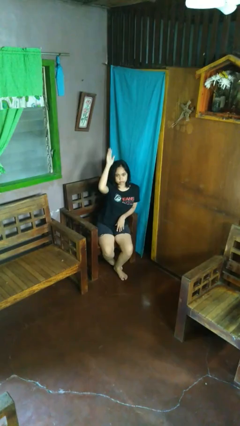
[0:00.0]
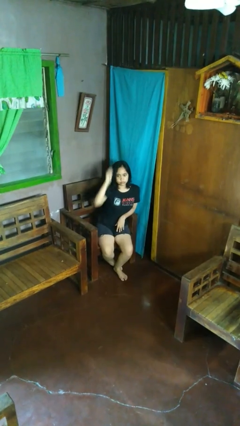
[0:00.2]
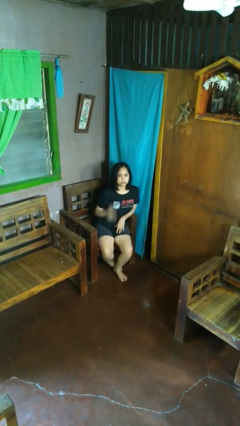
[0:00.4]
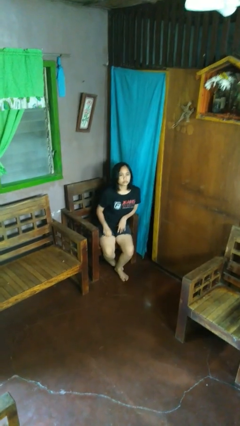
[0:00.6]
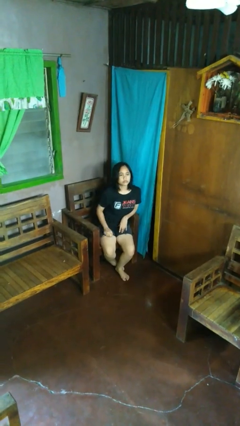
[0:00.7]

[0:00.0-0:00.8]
person gestures lower hand

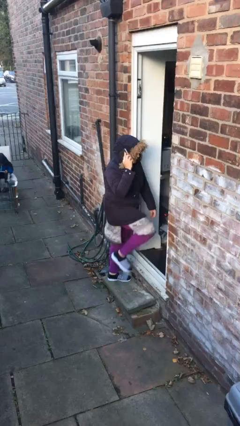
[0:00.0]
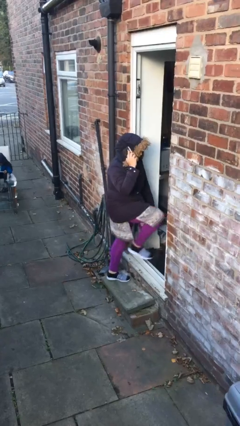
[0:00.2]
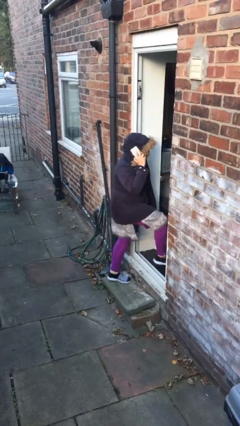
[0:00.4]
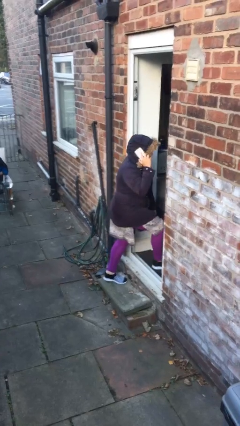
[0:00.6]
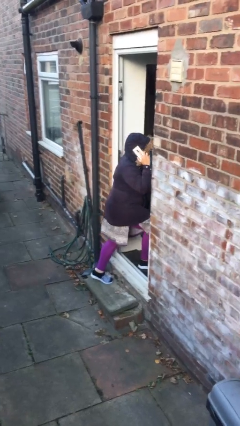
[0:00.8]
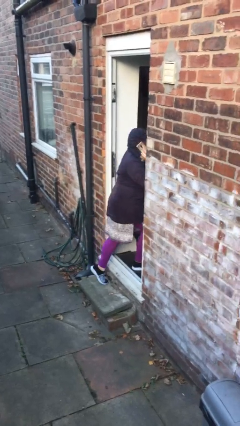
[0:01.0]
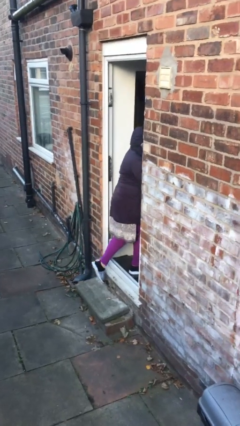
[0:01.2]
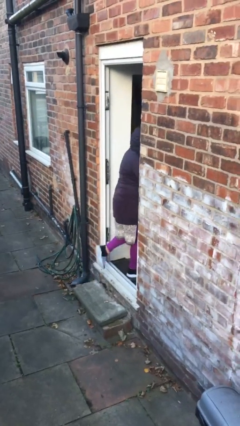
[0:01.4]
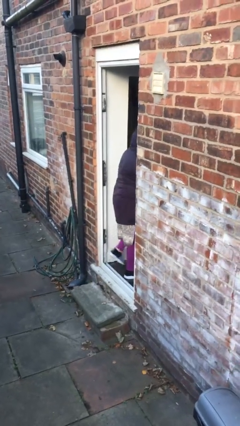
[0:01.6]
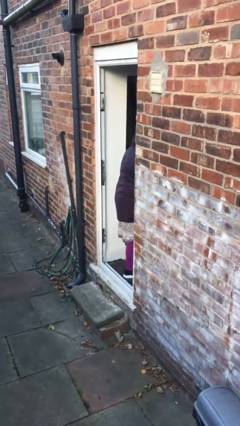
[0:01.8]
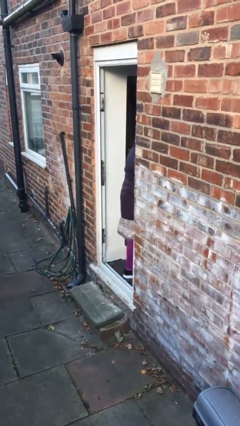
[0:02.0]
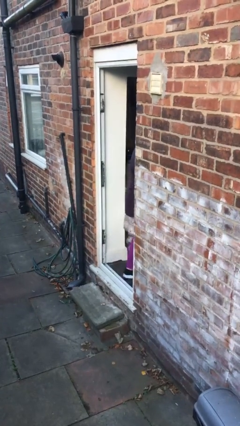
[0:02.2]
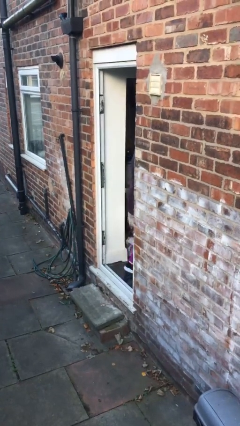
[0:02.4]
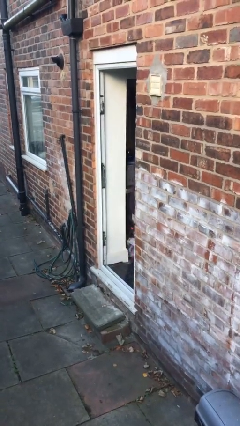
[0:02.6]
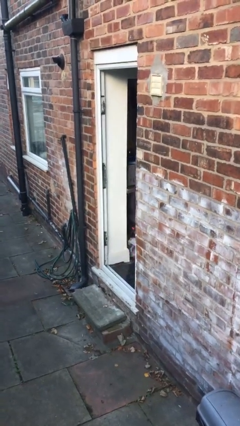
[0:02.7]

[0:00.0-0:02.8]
person exits scene through structure

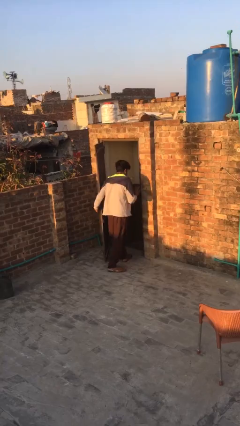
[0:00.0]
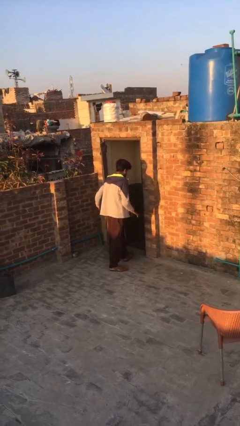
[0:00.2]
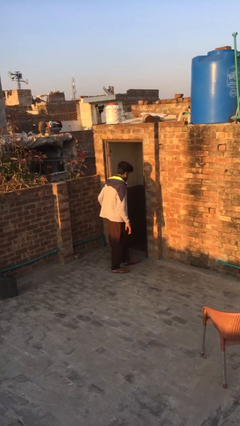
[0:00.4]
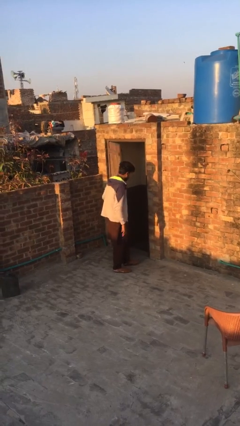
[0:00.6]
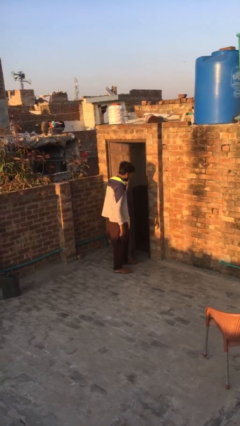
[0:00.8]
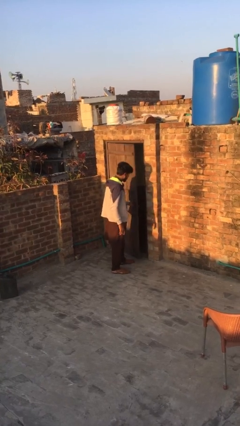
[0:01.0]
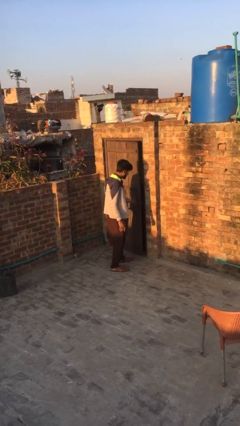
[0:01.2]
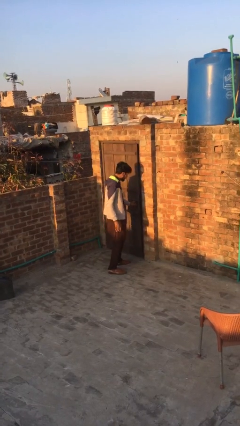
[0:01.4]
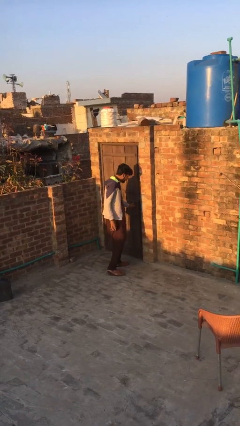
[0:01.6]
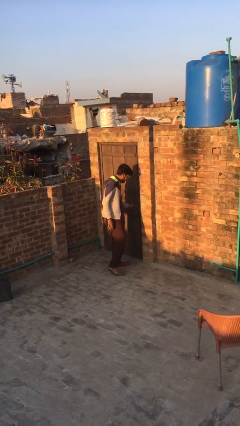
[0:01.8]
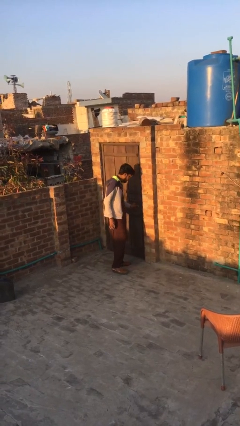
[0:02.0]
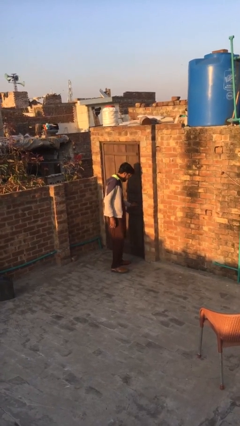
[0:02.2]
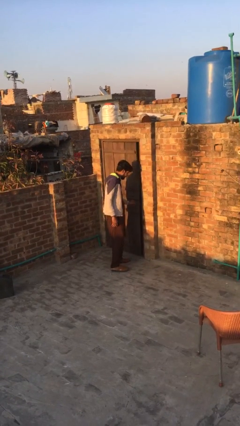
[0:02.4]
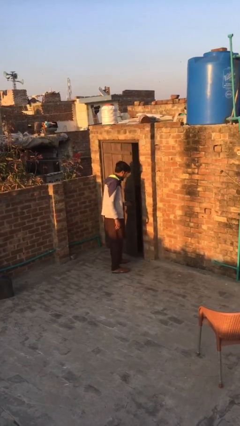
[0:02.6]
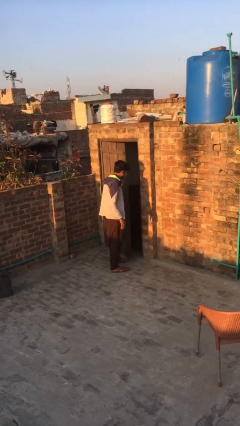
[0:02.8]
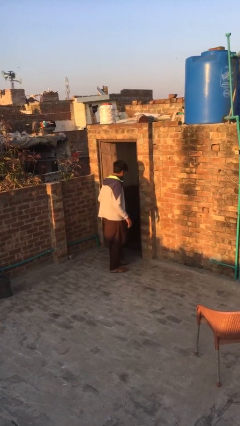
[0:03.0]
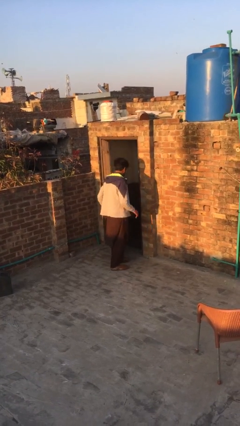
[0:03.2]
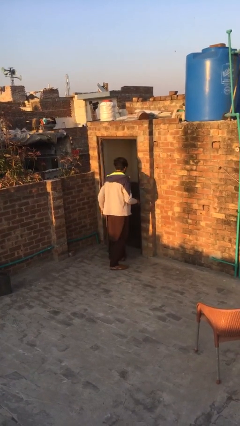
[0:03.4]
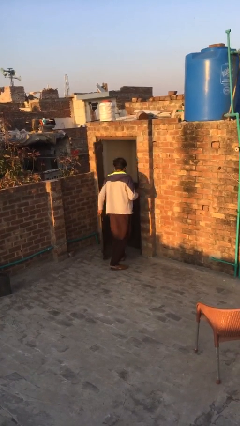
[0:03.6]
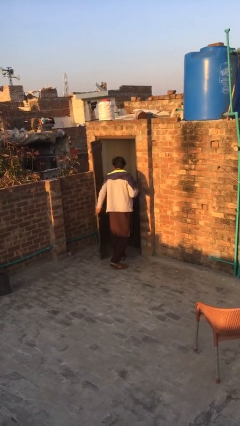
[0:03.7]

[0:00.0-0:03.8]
person closes facility door

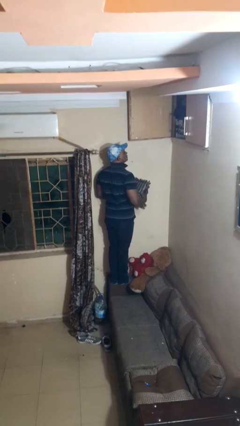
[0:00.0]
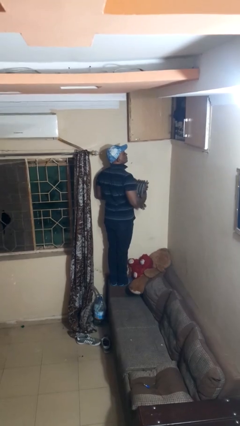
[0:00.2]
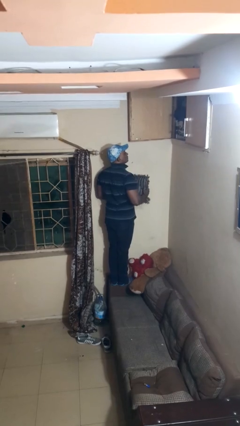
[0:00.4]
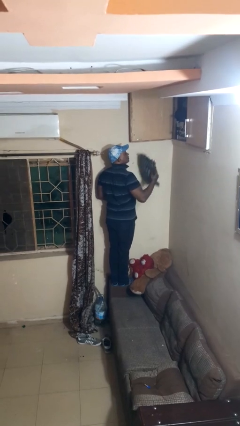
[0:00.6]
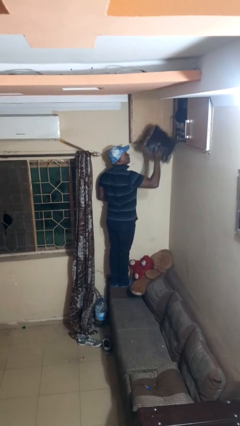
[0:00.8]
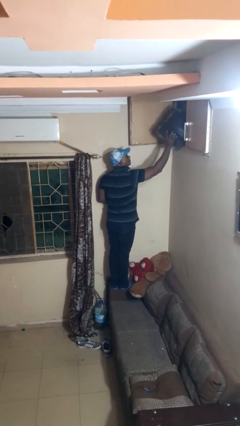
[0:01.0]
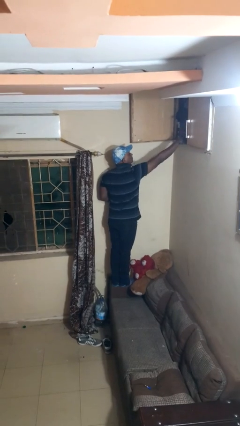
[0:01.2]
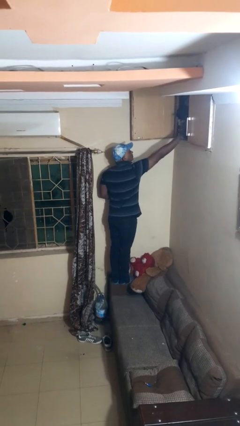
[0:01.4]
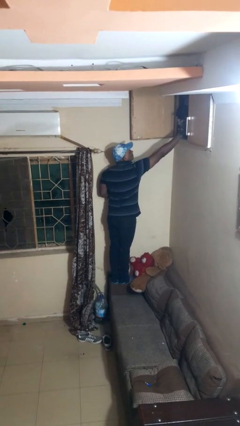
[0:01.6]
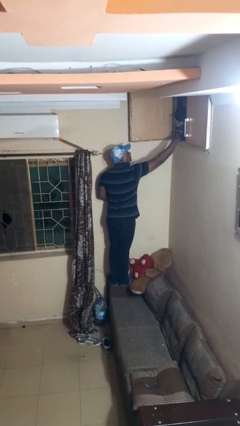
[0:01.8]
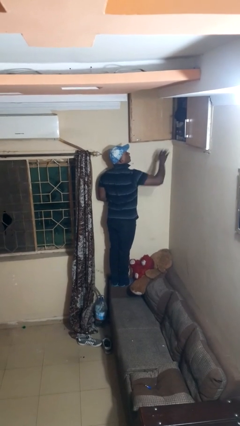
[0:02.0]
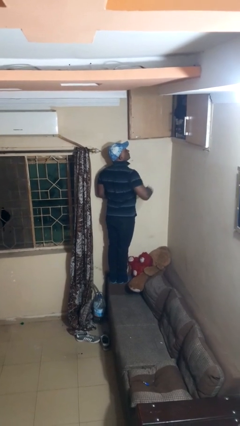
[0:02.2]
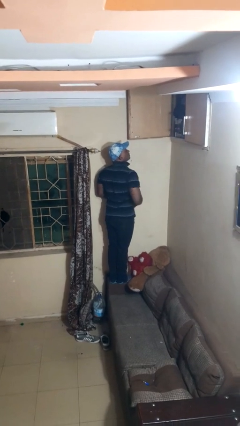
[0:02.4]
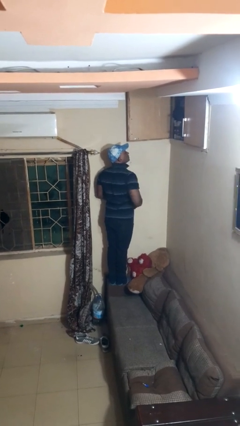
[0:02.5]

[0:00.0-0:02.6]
person puts object in cabinet

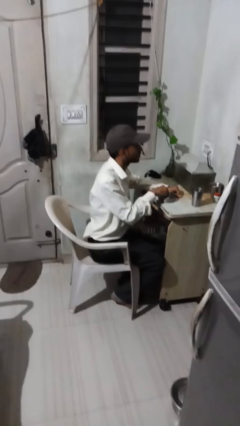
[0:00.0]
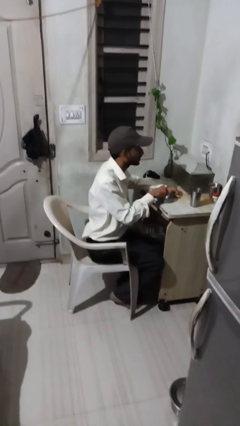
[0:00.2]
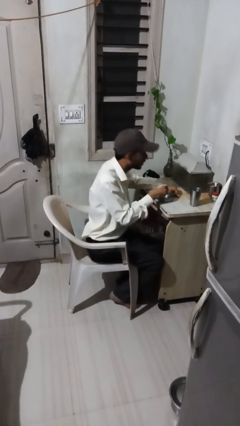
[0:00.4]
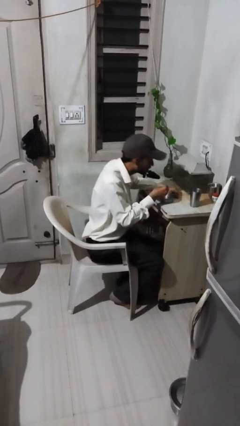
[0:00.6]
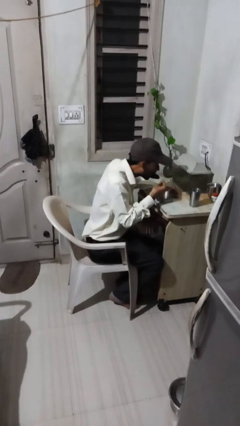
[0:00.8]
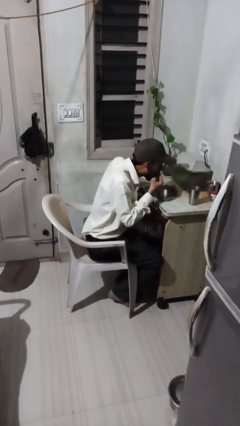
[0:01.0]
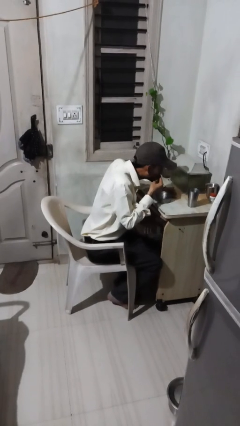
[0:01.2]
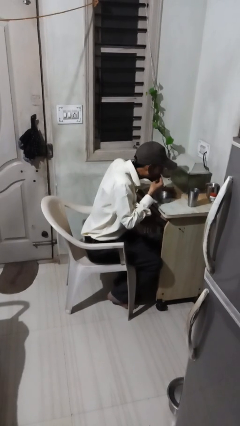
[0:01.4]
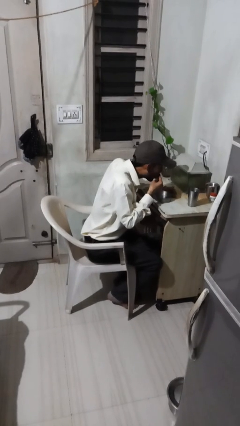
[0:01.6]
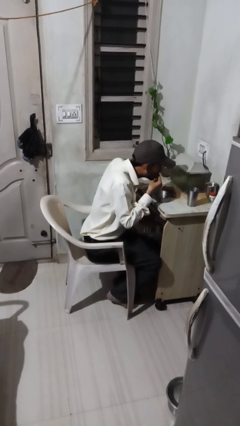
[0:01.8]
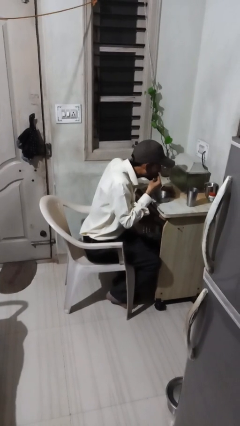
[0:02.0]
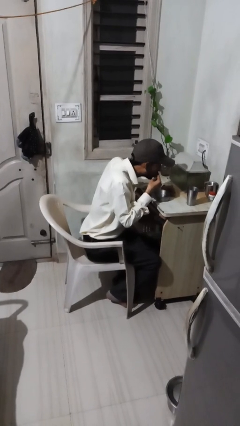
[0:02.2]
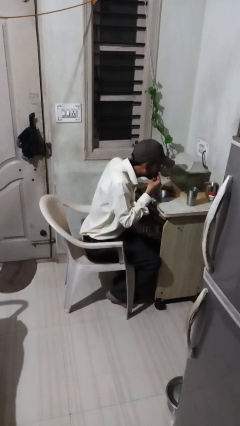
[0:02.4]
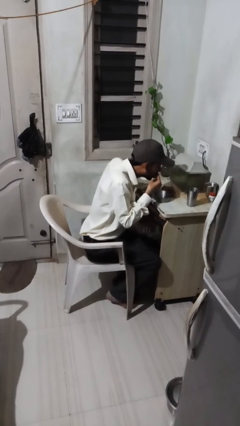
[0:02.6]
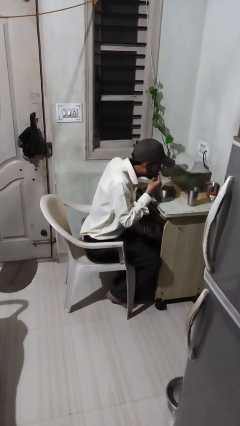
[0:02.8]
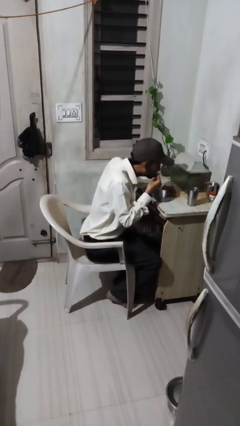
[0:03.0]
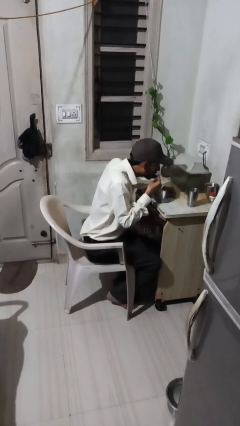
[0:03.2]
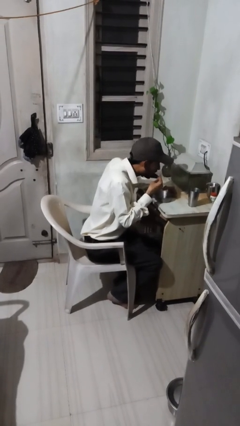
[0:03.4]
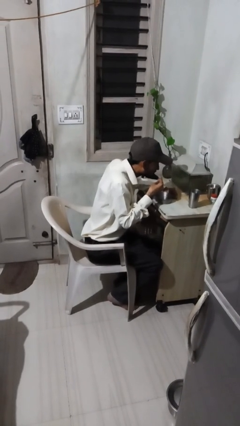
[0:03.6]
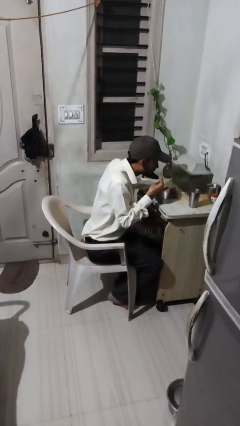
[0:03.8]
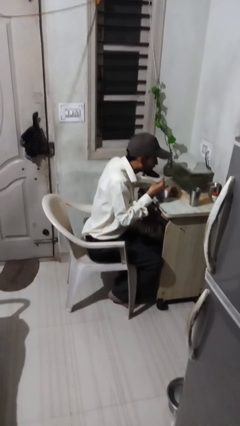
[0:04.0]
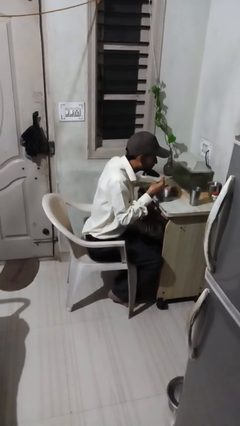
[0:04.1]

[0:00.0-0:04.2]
person eats with hands

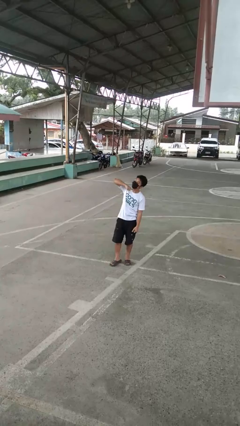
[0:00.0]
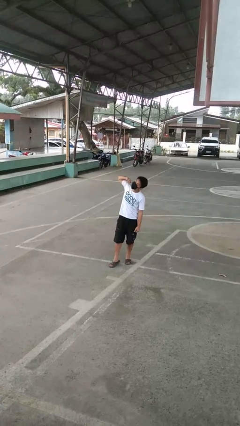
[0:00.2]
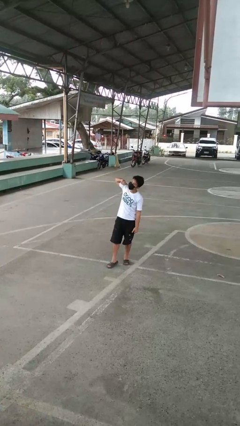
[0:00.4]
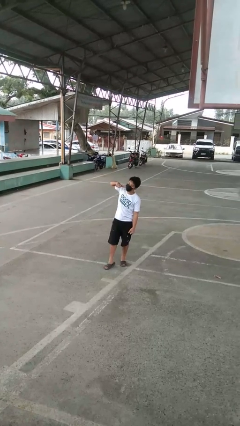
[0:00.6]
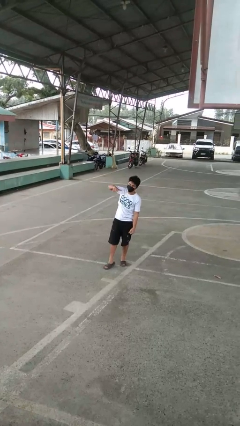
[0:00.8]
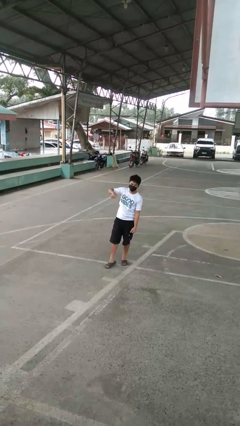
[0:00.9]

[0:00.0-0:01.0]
person gestures cut

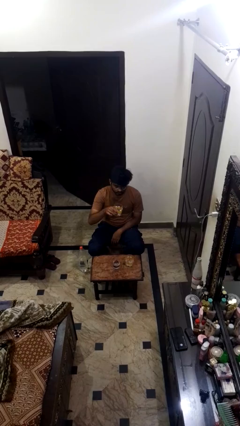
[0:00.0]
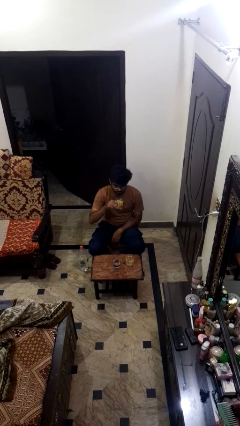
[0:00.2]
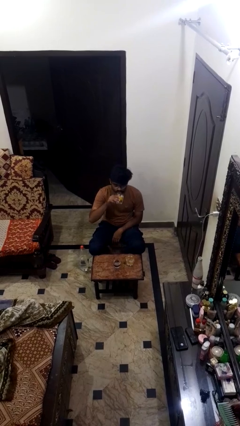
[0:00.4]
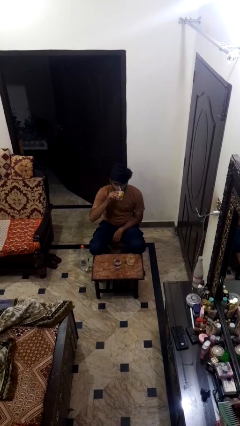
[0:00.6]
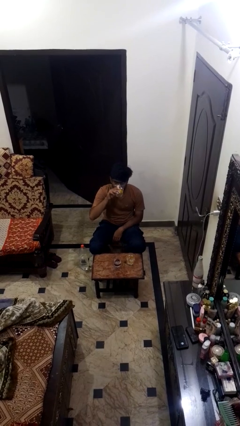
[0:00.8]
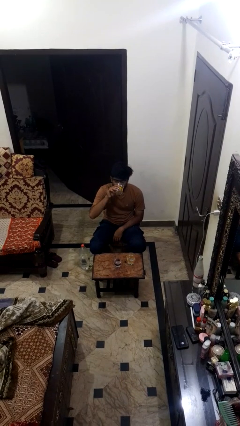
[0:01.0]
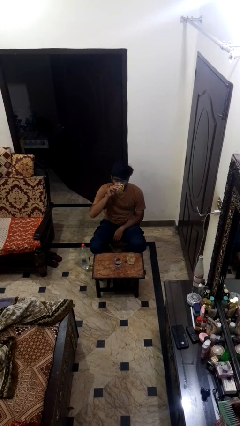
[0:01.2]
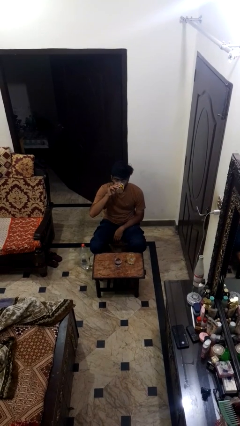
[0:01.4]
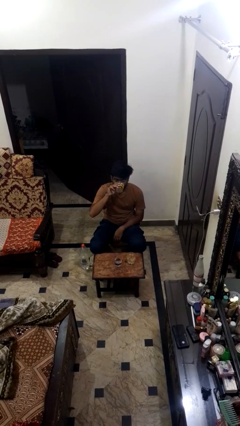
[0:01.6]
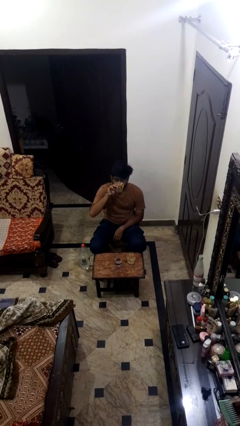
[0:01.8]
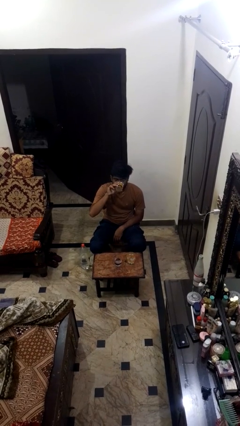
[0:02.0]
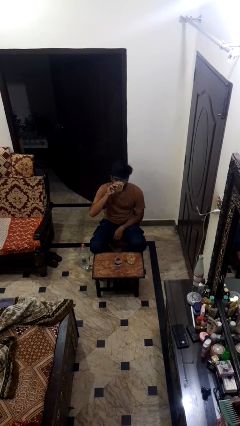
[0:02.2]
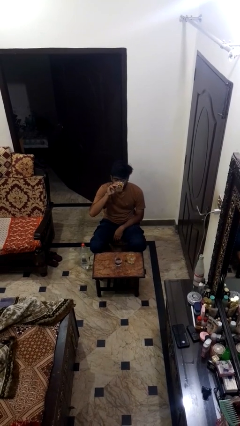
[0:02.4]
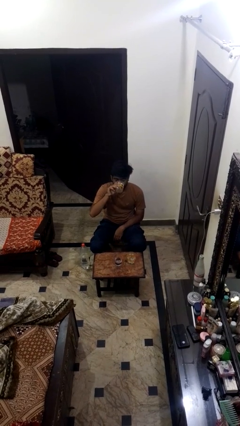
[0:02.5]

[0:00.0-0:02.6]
person drinks from shotglass
